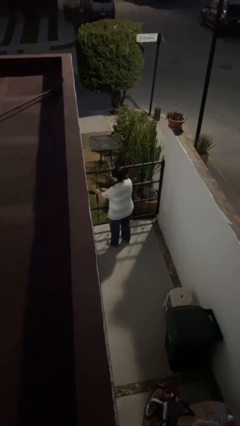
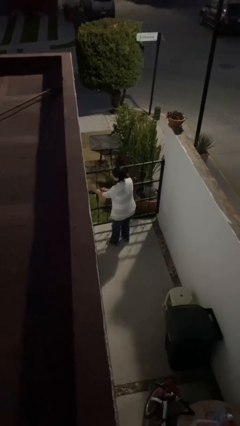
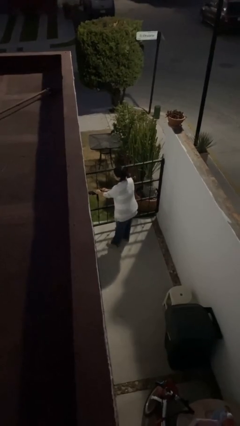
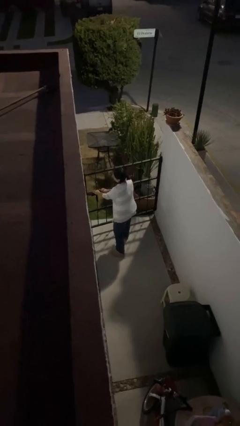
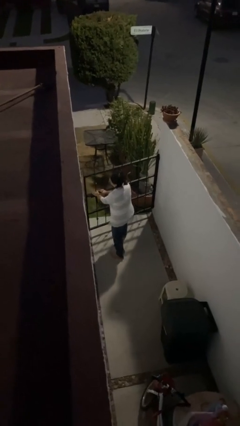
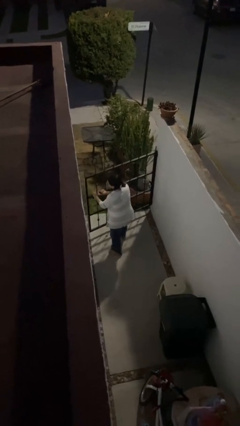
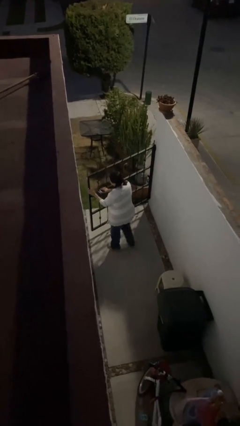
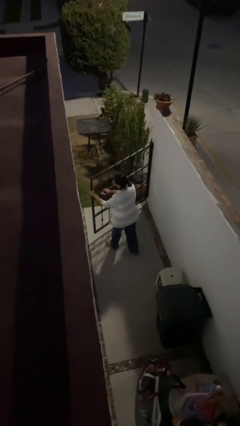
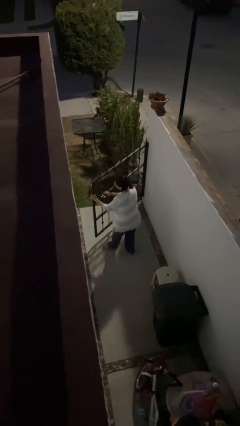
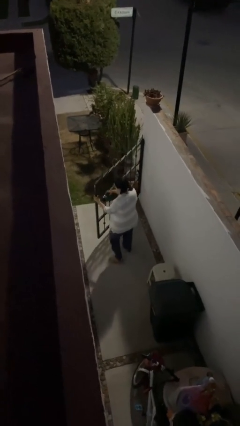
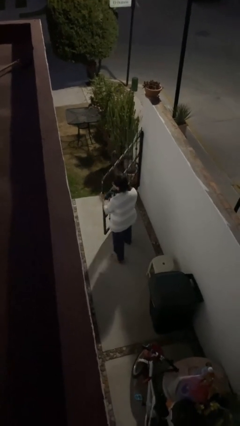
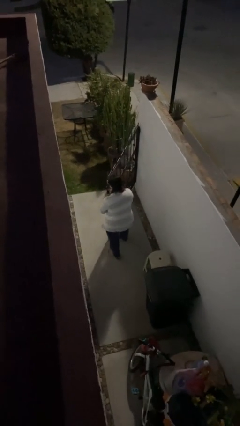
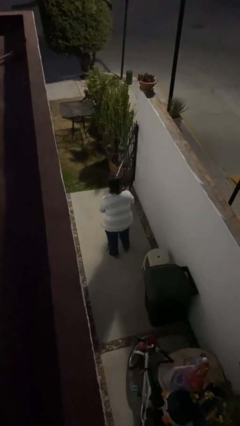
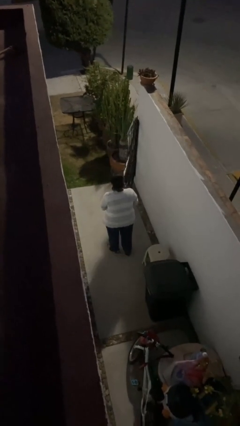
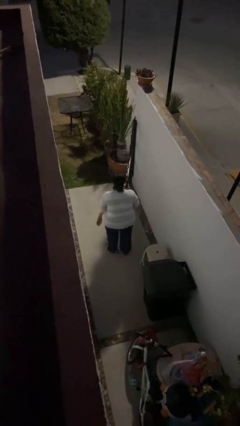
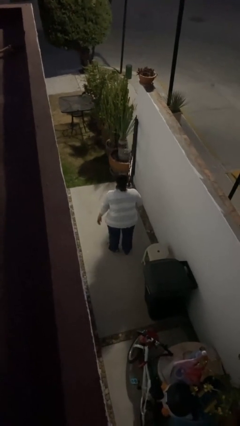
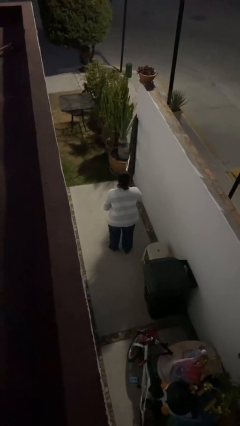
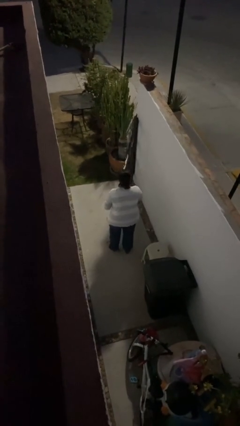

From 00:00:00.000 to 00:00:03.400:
person opens facility door

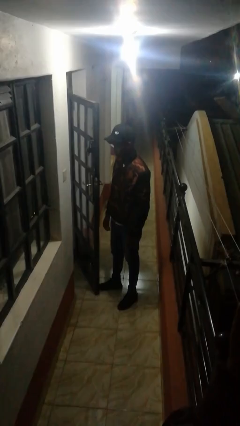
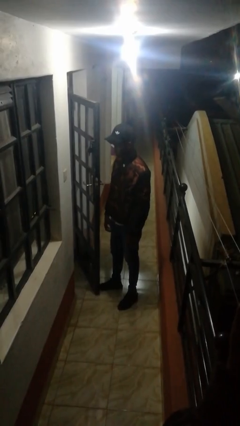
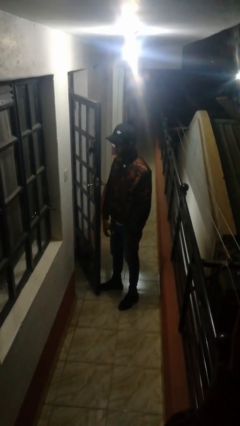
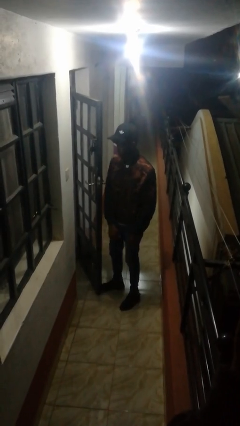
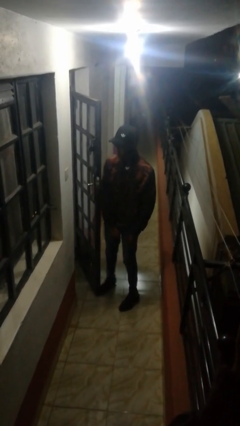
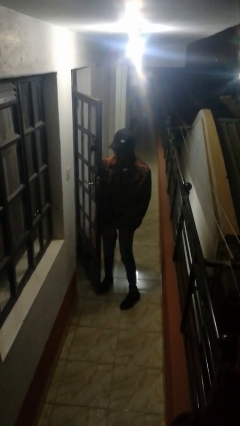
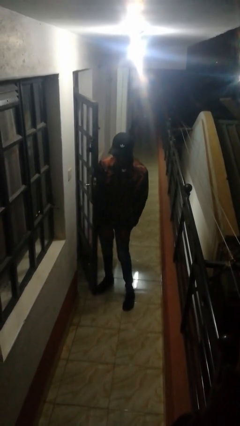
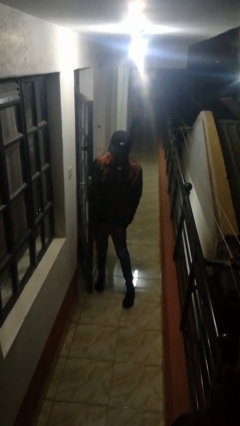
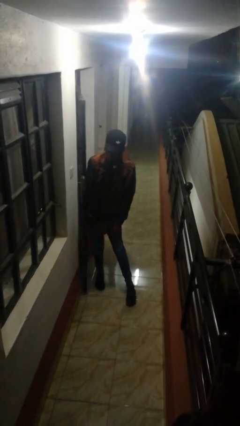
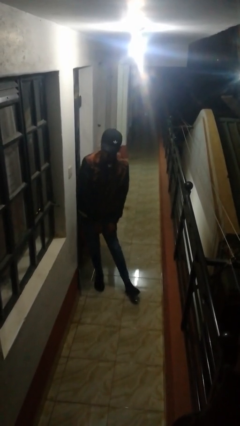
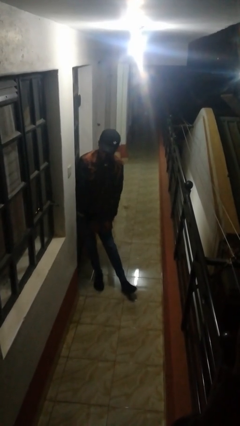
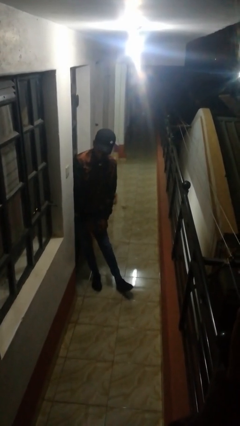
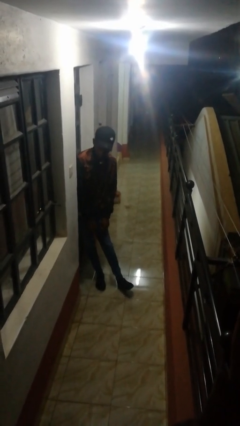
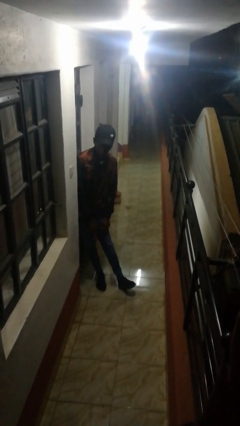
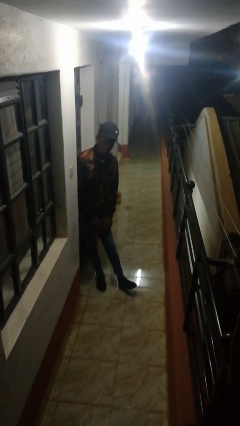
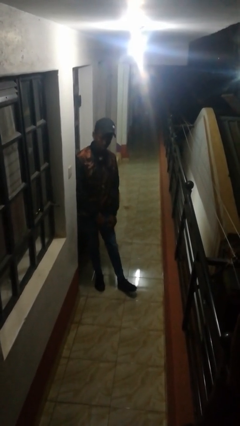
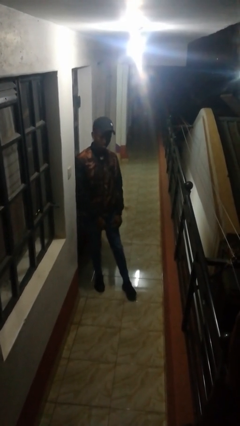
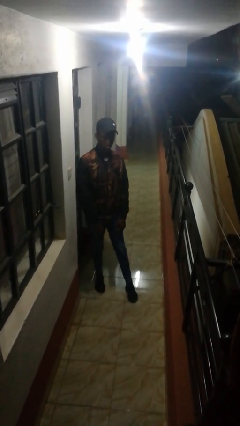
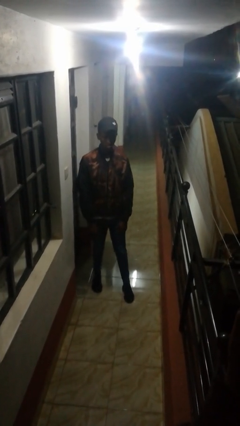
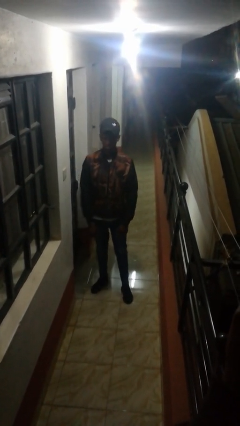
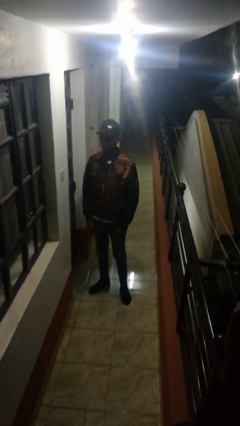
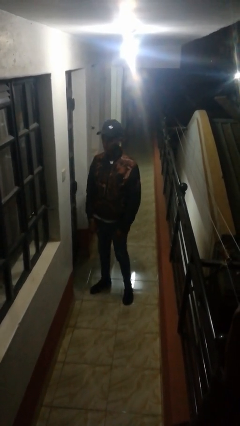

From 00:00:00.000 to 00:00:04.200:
person closes door with hip

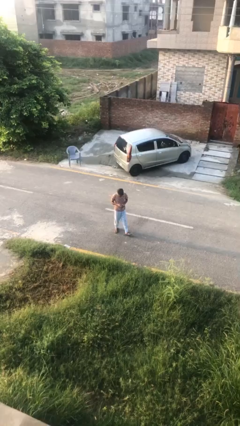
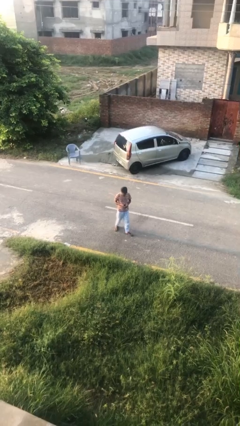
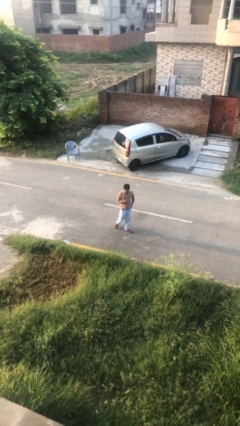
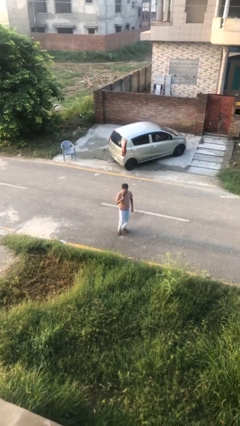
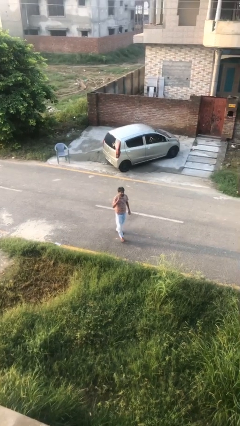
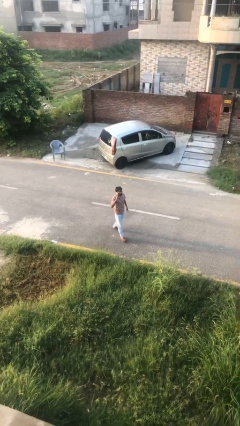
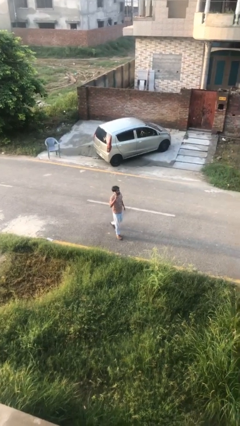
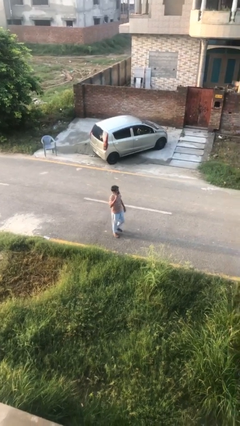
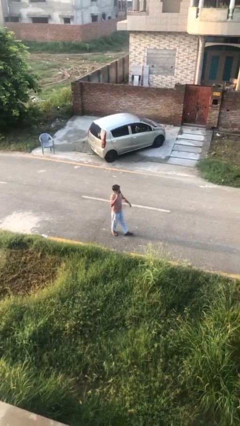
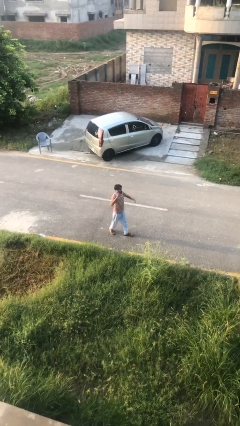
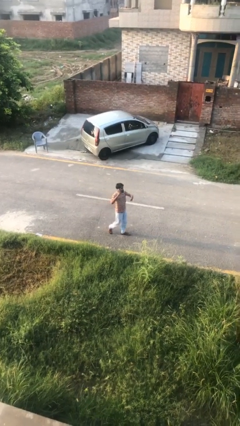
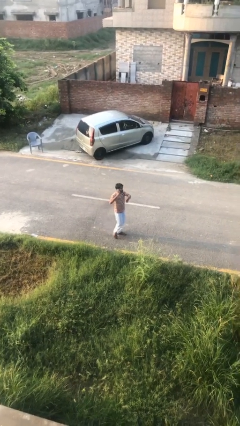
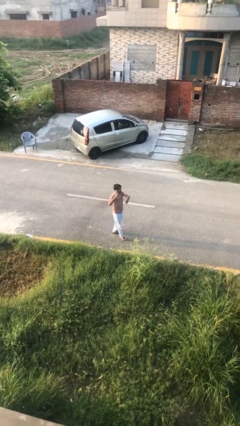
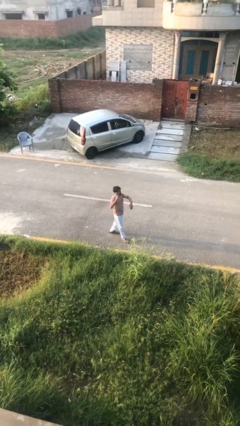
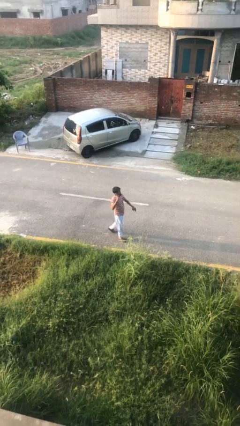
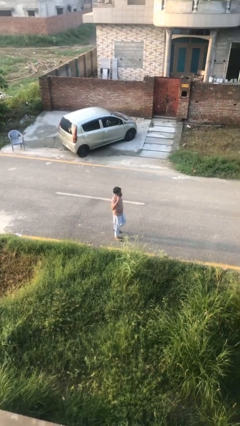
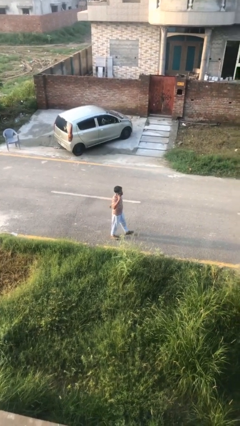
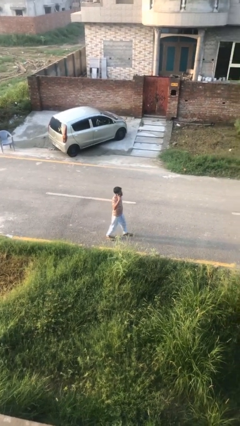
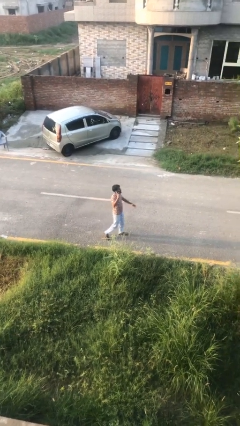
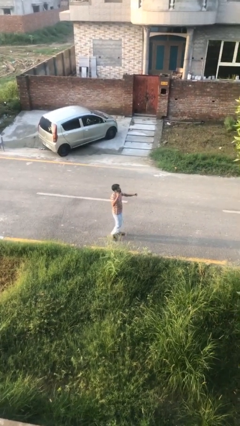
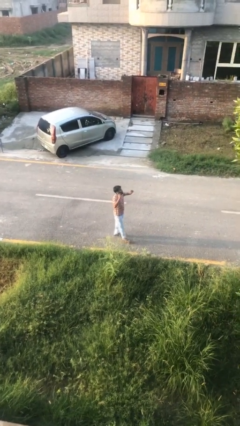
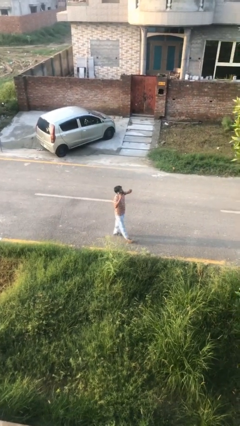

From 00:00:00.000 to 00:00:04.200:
person talks on phone

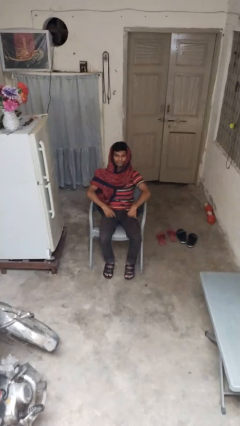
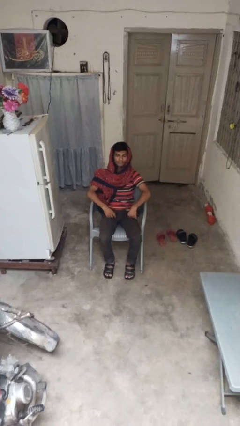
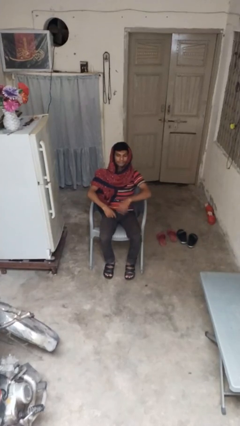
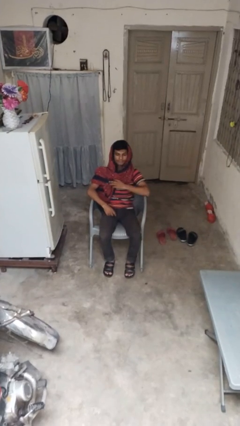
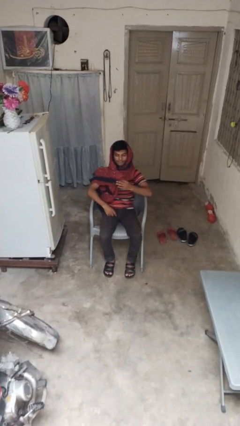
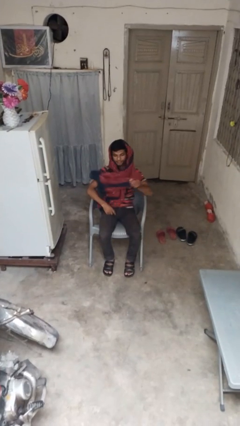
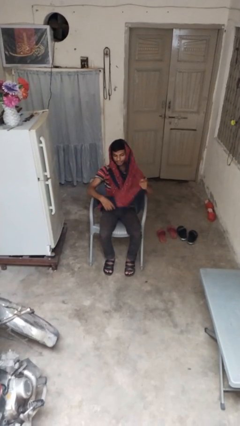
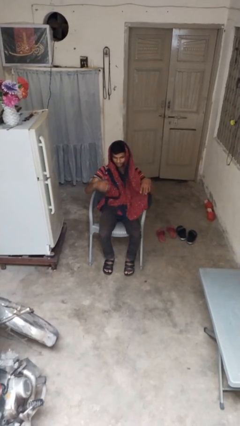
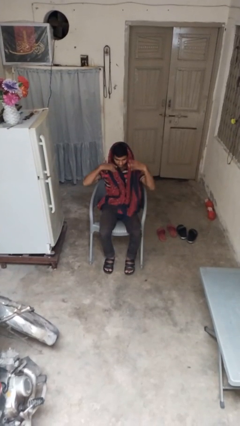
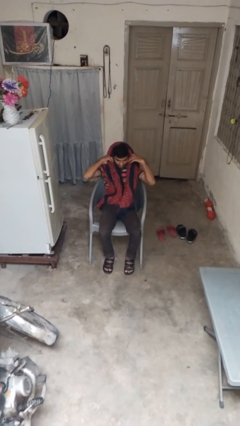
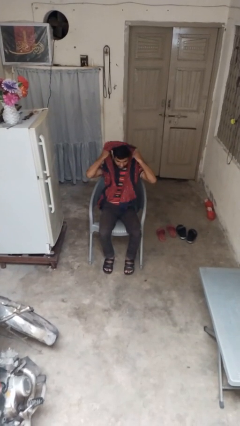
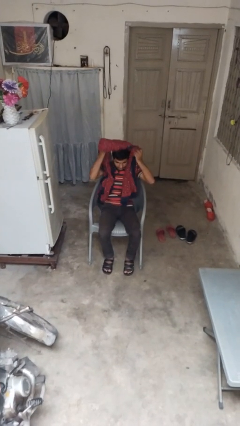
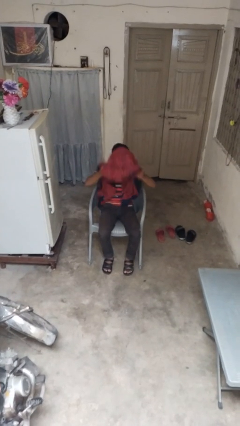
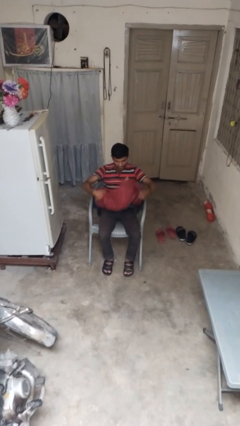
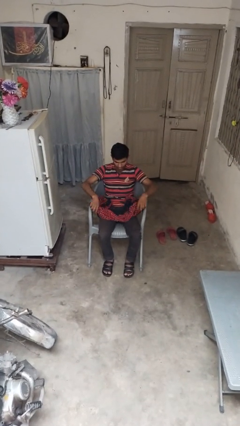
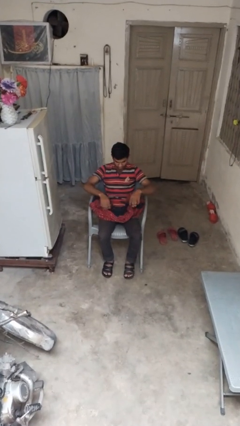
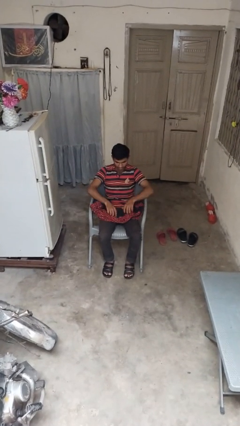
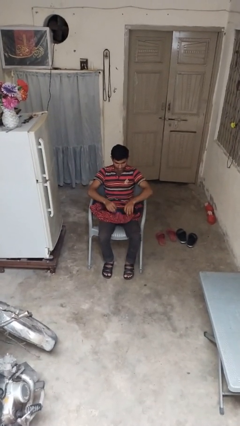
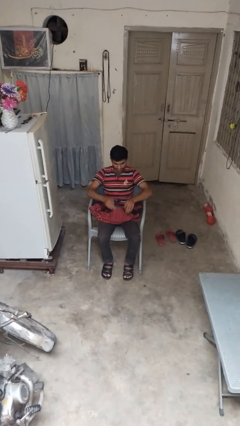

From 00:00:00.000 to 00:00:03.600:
person takes off scarf

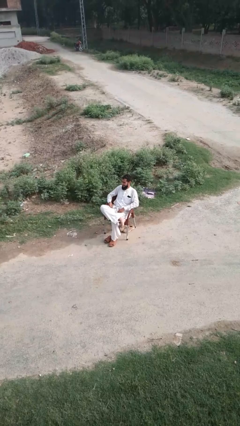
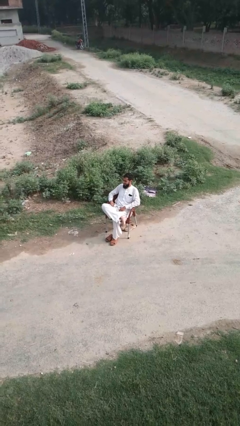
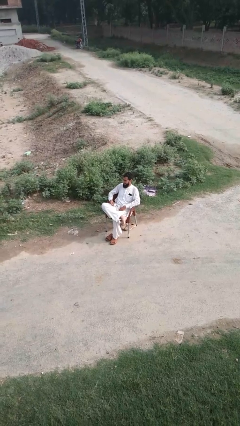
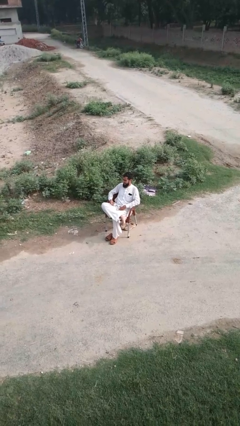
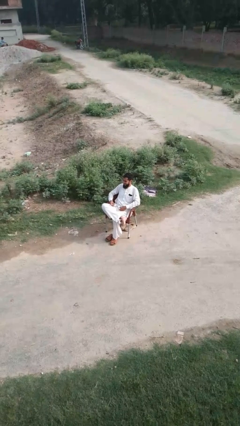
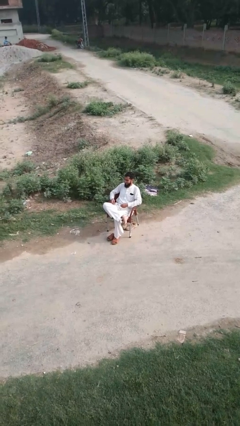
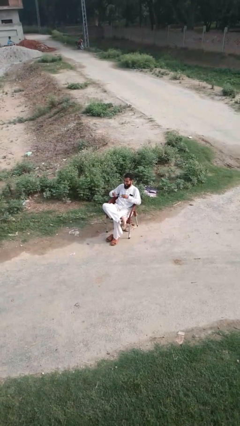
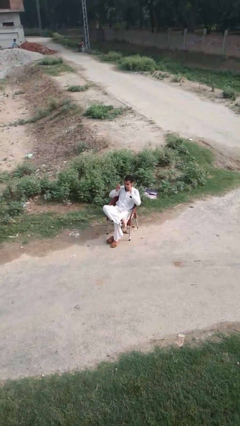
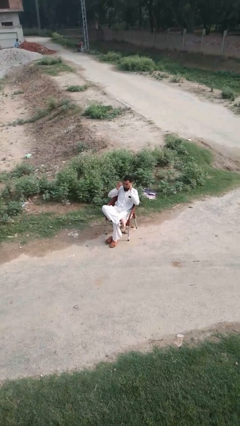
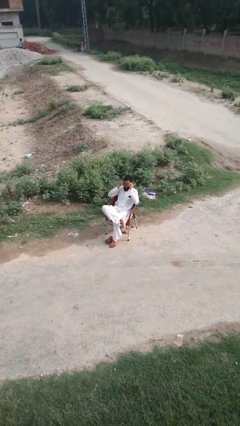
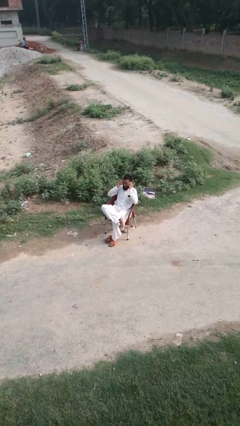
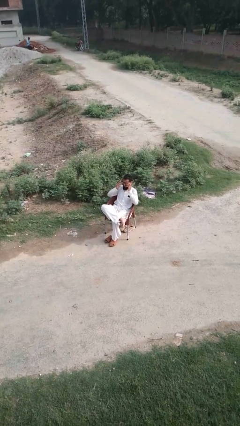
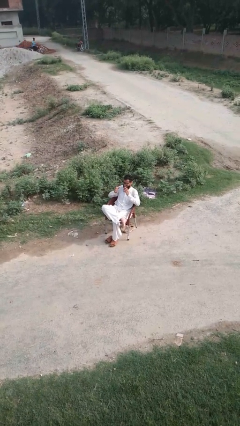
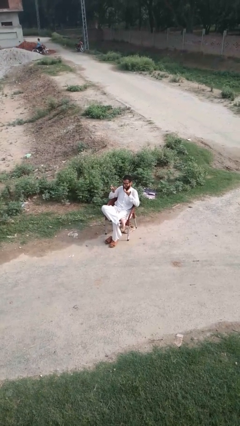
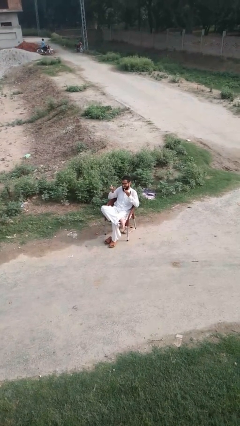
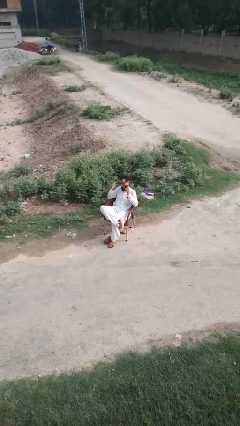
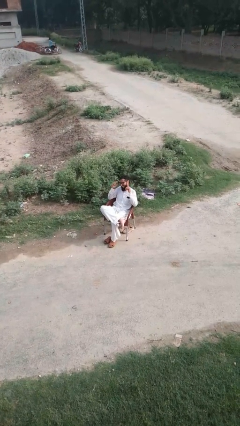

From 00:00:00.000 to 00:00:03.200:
person puts on glasses
